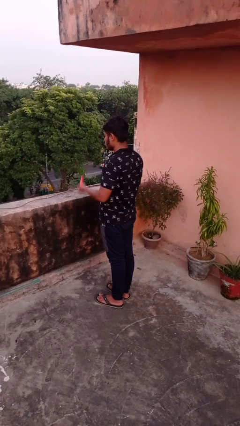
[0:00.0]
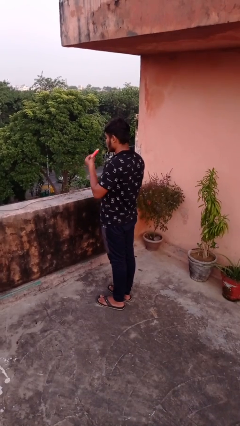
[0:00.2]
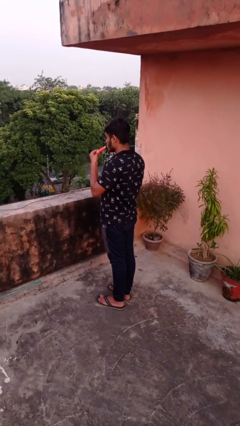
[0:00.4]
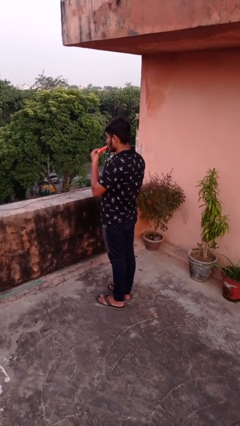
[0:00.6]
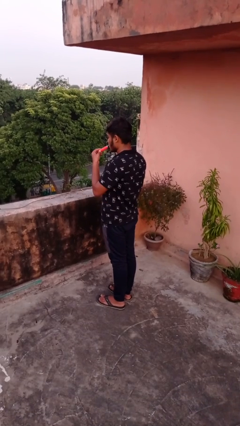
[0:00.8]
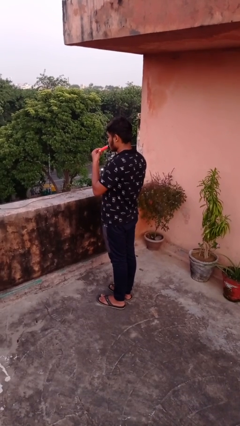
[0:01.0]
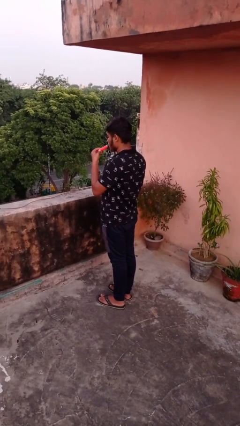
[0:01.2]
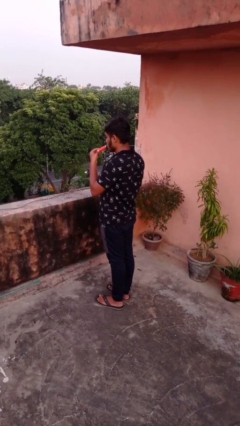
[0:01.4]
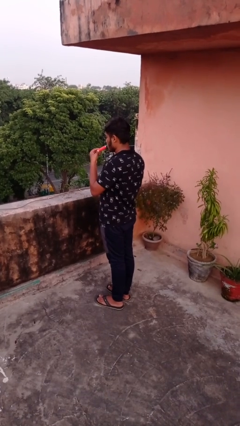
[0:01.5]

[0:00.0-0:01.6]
person vapes

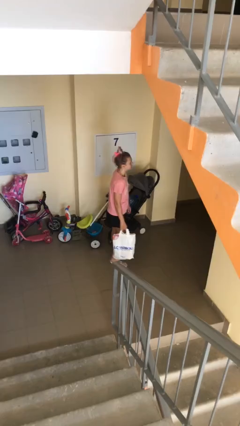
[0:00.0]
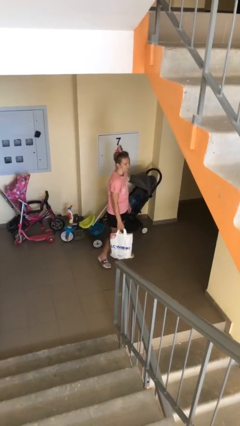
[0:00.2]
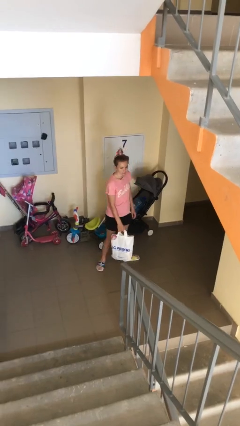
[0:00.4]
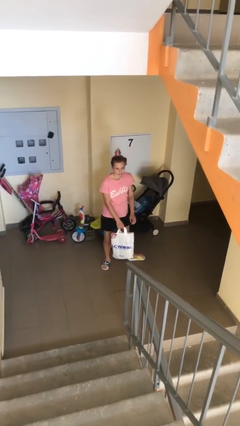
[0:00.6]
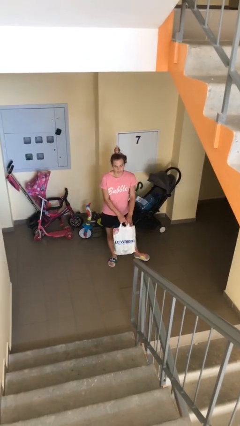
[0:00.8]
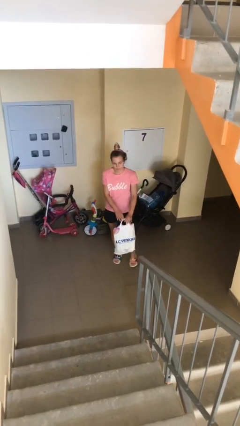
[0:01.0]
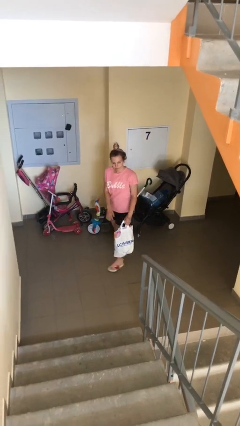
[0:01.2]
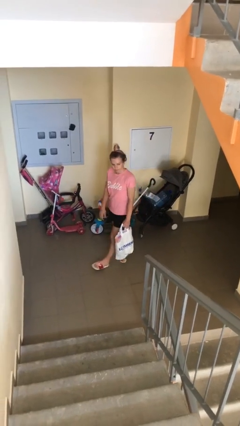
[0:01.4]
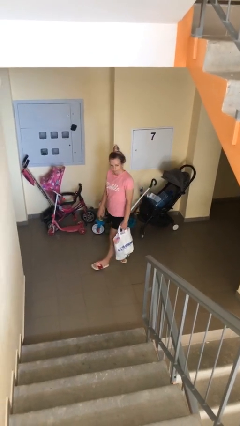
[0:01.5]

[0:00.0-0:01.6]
person carries groceries

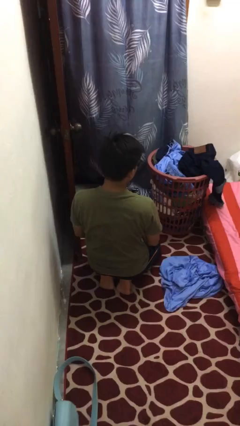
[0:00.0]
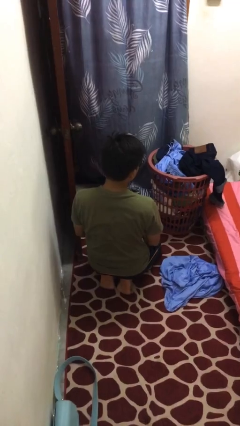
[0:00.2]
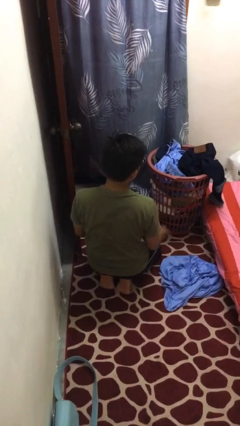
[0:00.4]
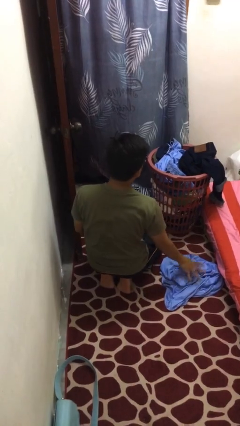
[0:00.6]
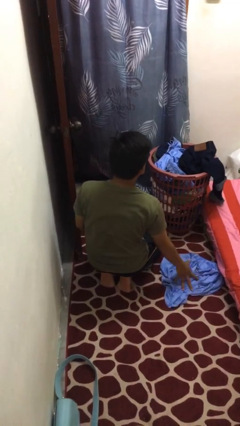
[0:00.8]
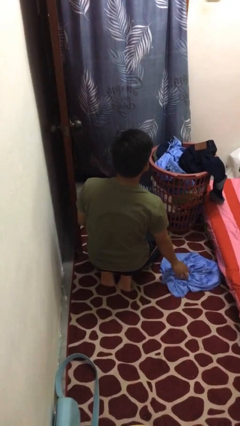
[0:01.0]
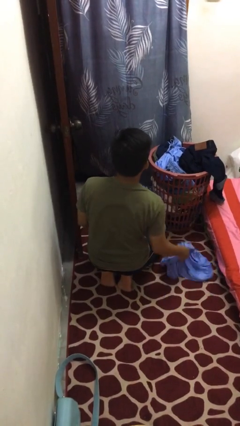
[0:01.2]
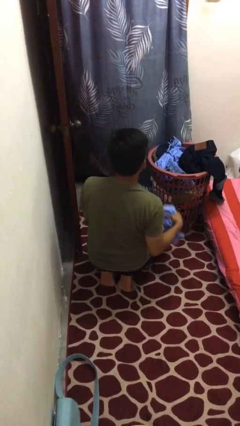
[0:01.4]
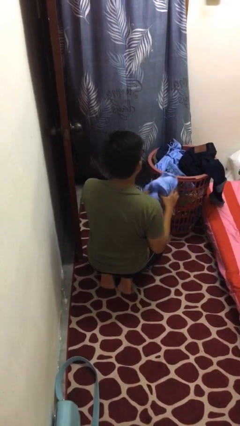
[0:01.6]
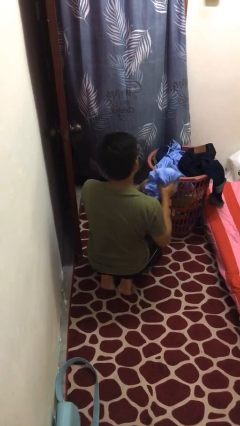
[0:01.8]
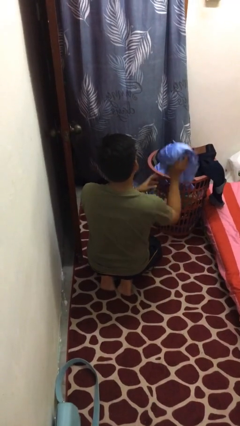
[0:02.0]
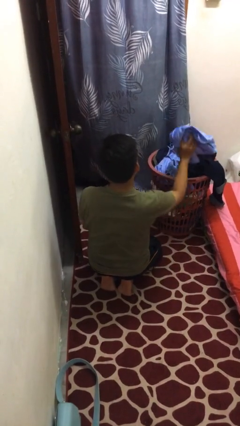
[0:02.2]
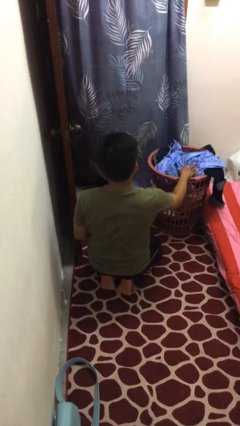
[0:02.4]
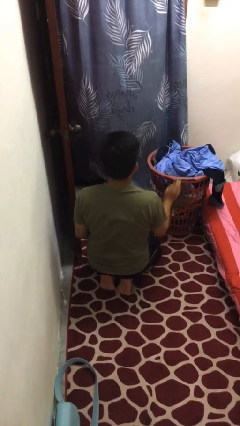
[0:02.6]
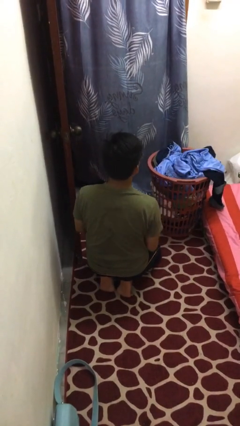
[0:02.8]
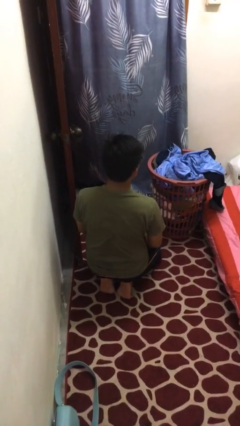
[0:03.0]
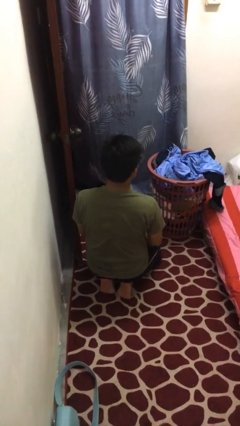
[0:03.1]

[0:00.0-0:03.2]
person puts object into basket

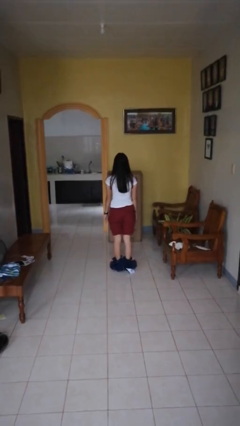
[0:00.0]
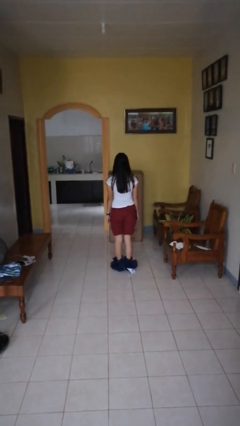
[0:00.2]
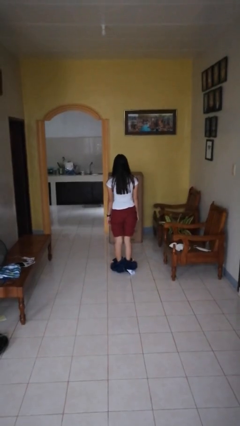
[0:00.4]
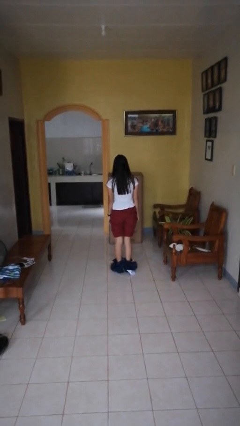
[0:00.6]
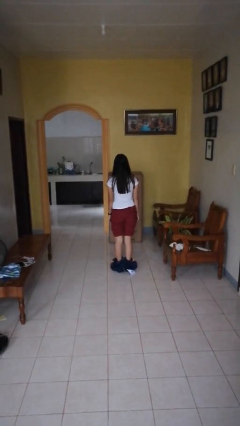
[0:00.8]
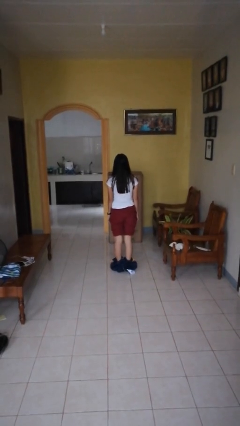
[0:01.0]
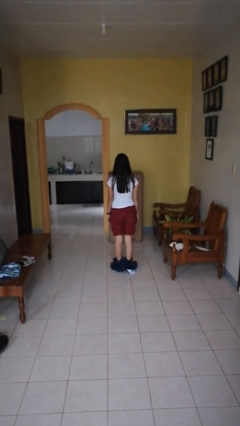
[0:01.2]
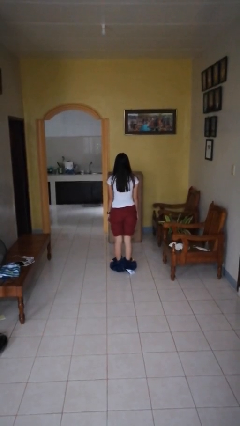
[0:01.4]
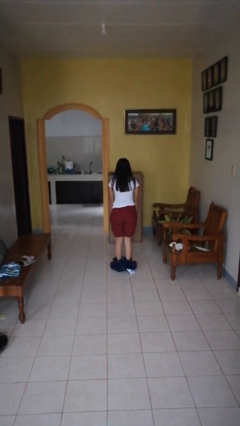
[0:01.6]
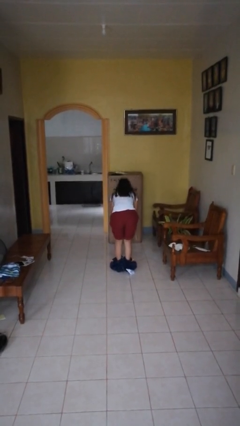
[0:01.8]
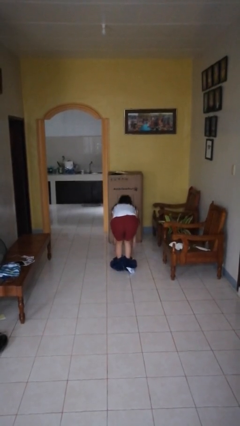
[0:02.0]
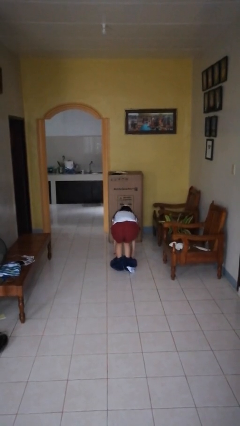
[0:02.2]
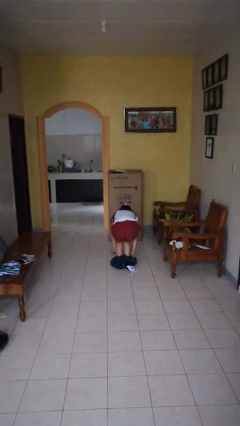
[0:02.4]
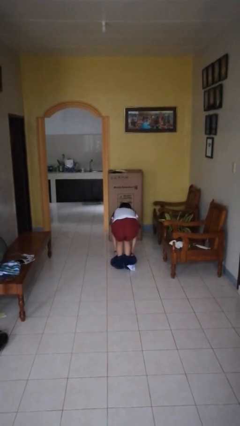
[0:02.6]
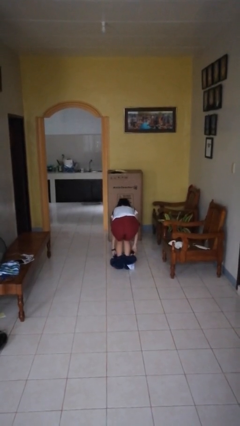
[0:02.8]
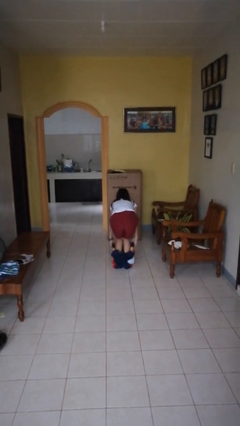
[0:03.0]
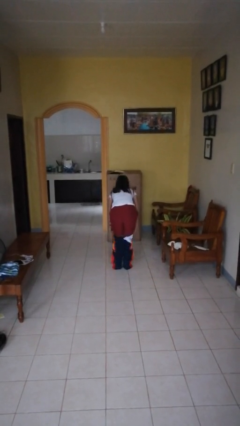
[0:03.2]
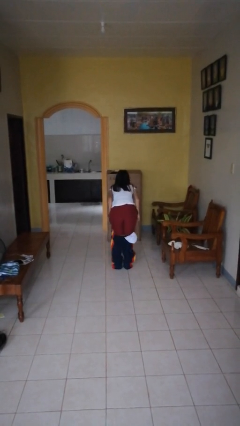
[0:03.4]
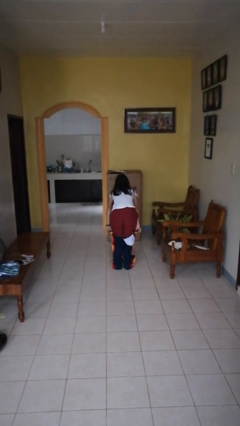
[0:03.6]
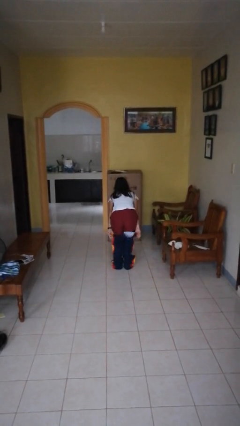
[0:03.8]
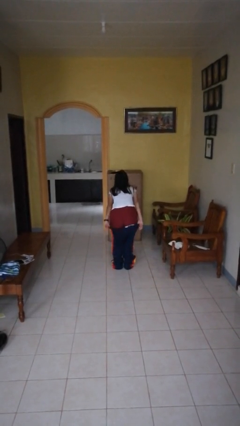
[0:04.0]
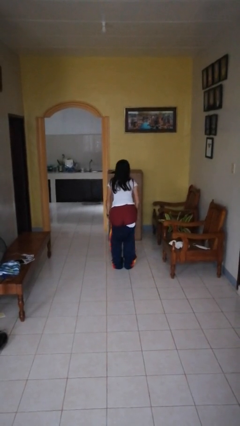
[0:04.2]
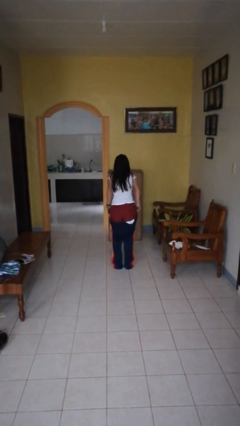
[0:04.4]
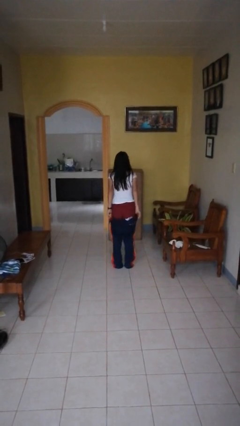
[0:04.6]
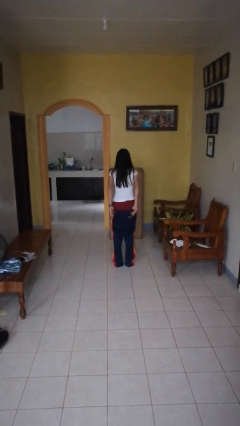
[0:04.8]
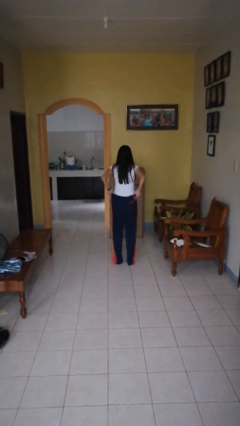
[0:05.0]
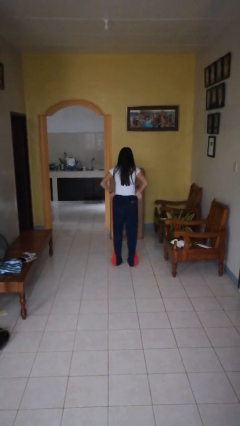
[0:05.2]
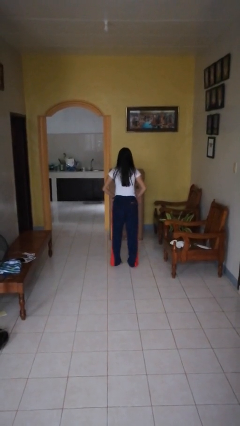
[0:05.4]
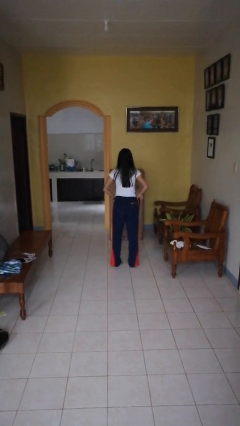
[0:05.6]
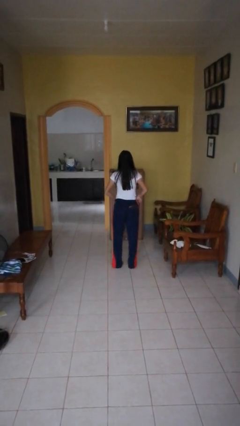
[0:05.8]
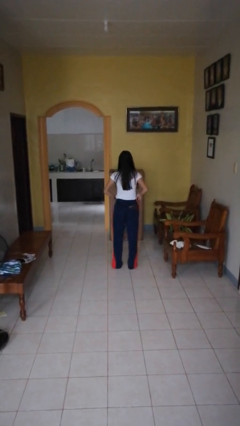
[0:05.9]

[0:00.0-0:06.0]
person puts on pants

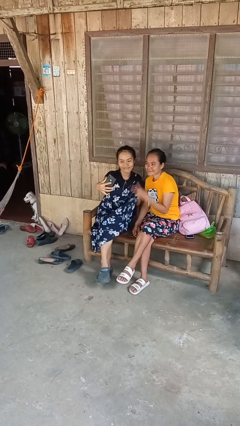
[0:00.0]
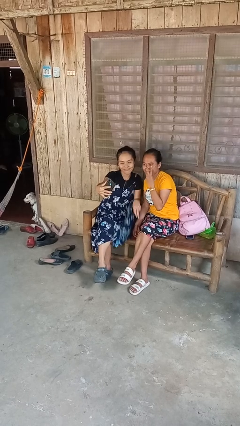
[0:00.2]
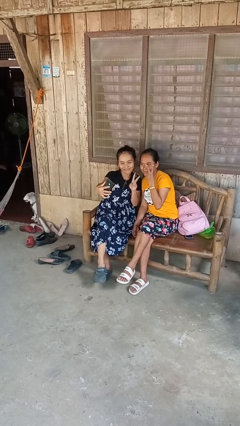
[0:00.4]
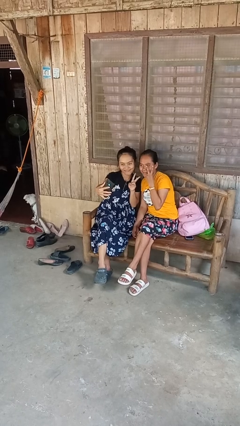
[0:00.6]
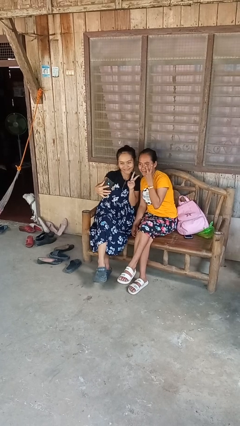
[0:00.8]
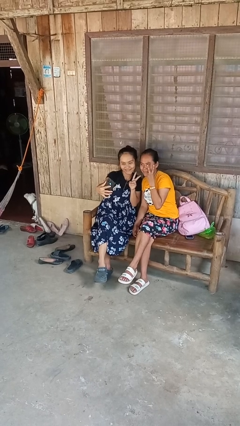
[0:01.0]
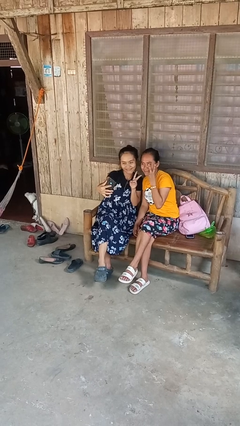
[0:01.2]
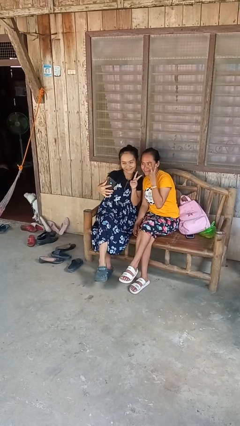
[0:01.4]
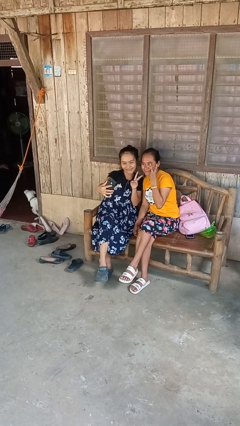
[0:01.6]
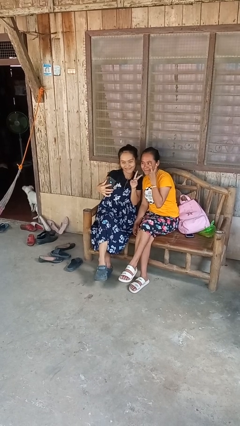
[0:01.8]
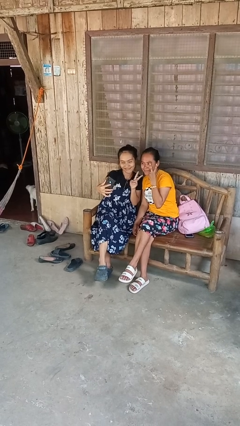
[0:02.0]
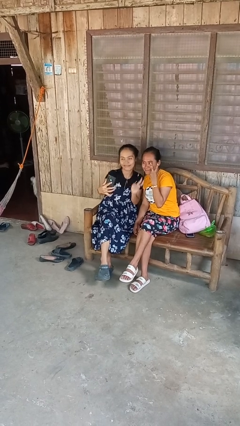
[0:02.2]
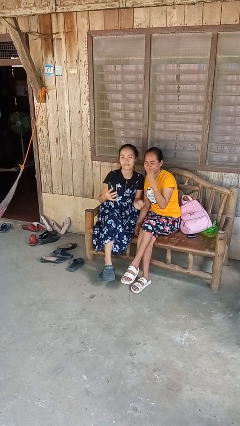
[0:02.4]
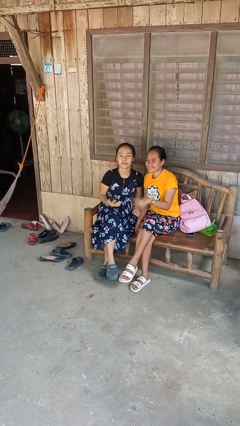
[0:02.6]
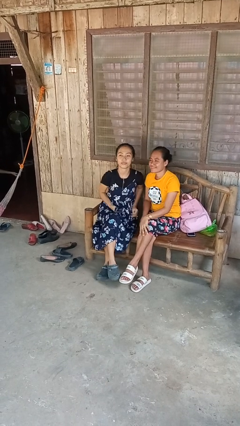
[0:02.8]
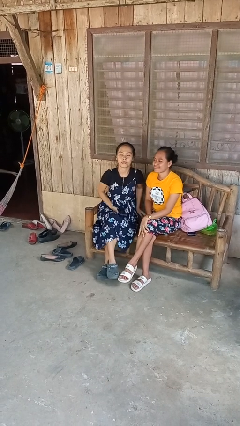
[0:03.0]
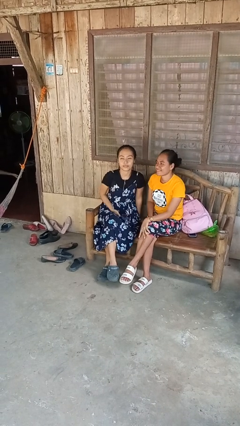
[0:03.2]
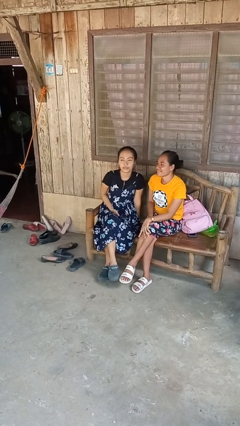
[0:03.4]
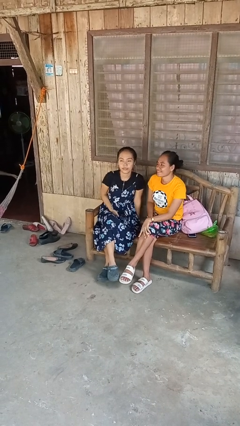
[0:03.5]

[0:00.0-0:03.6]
person takes selfie with person

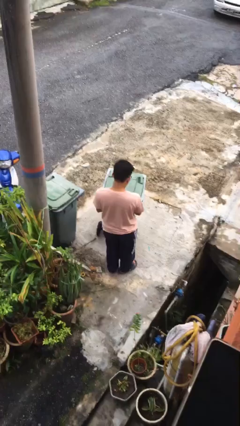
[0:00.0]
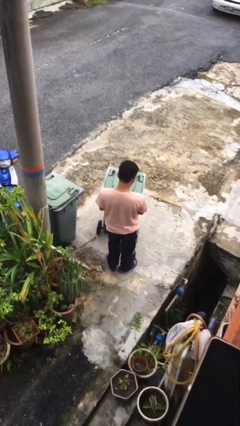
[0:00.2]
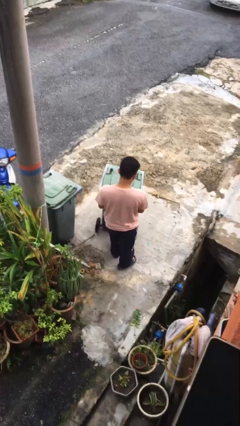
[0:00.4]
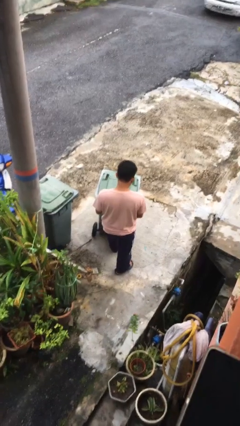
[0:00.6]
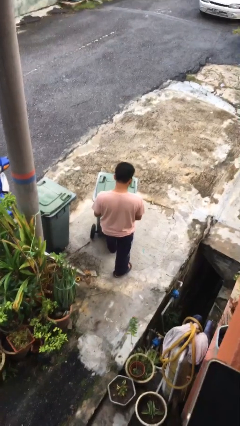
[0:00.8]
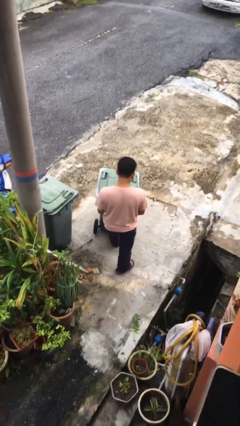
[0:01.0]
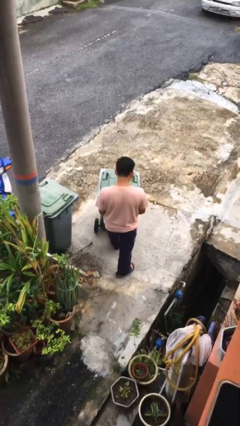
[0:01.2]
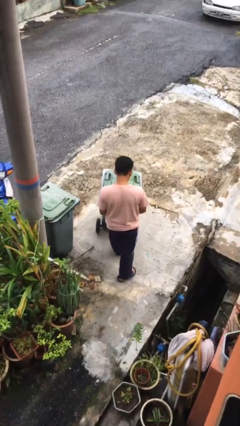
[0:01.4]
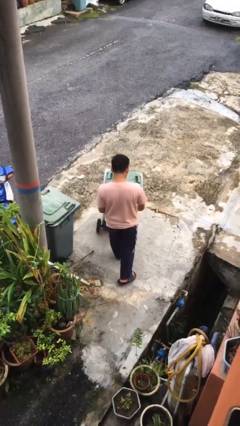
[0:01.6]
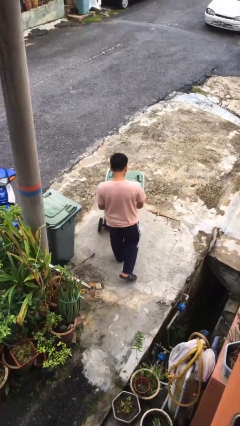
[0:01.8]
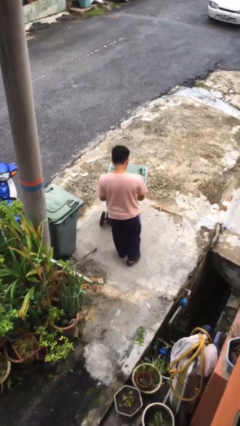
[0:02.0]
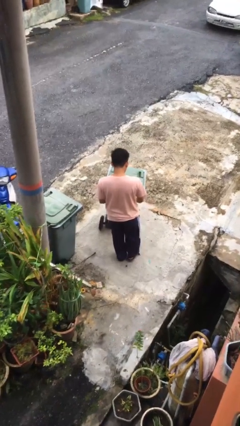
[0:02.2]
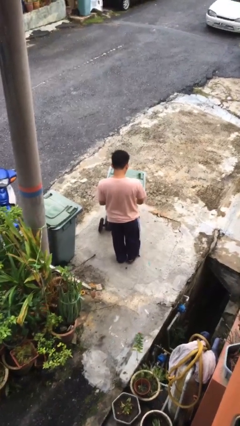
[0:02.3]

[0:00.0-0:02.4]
person pushes wheeled trashcan
